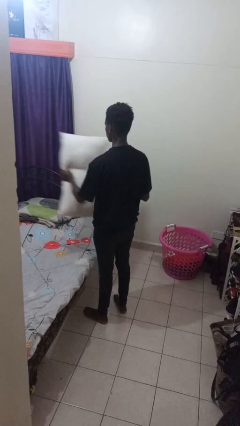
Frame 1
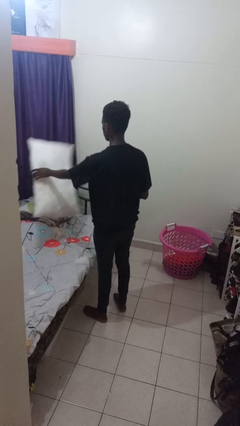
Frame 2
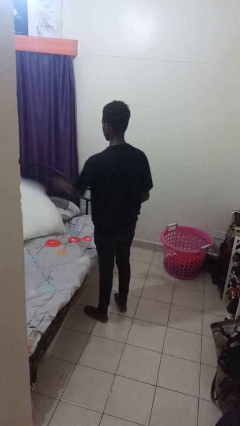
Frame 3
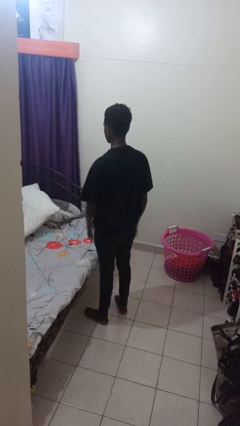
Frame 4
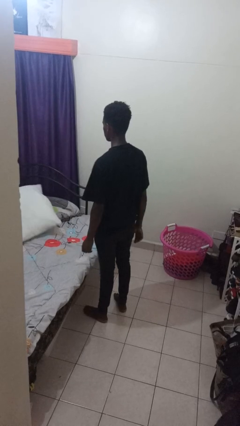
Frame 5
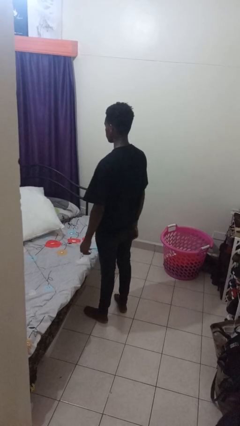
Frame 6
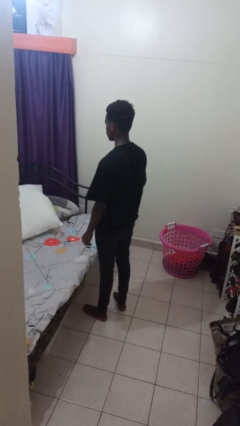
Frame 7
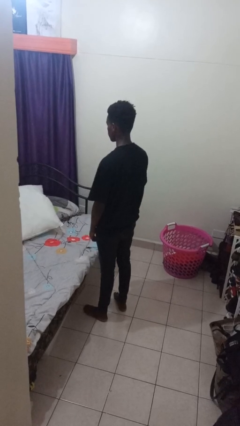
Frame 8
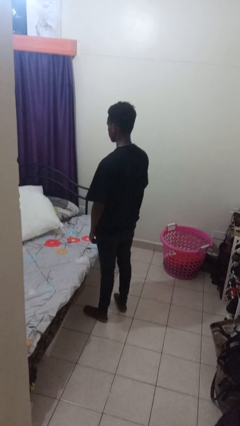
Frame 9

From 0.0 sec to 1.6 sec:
person puts down object on bed

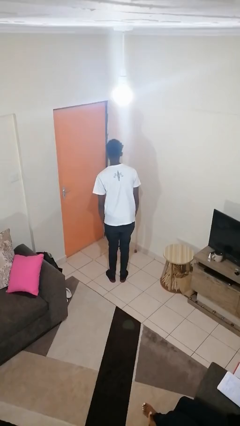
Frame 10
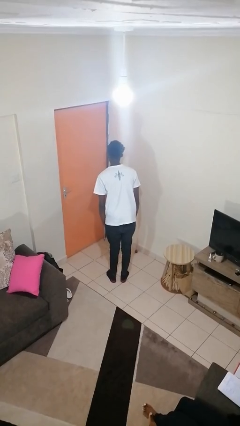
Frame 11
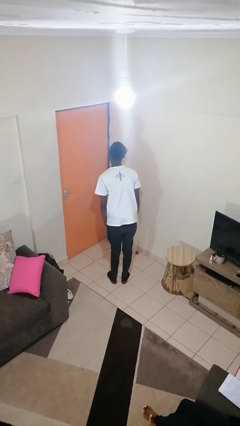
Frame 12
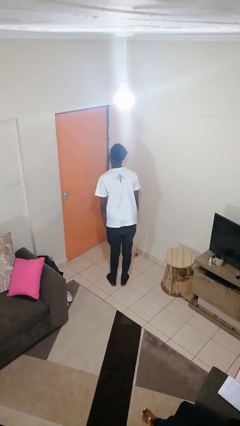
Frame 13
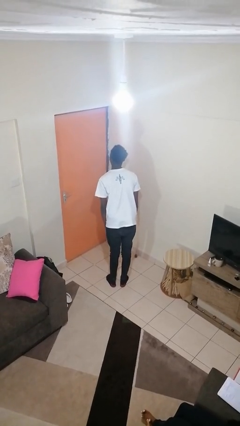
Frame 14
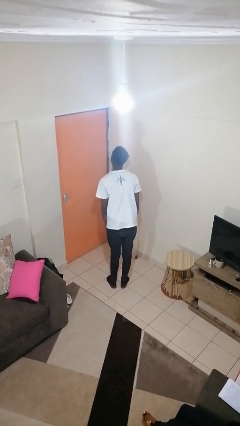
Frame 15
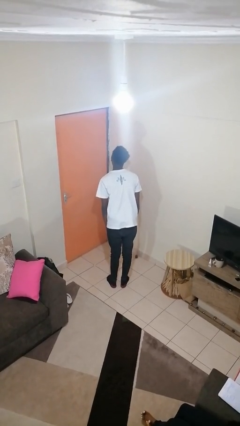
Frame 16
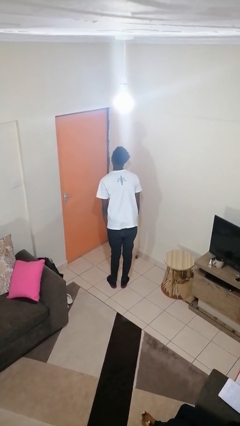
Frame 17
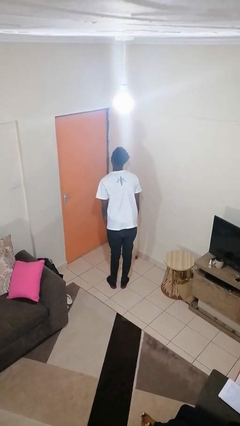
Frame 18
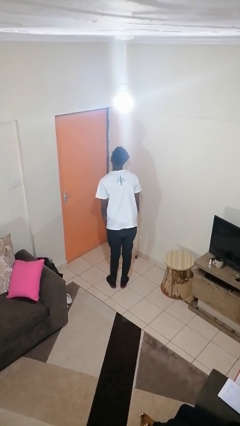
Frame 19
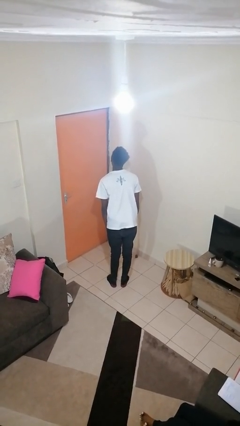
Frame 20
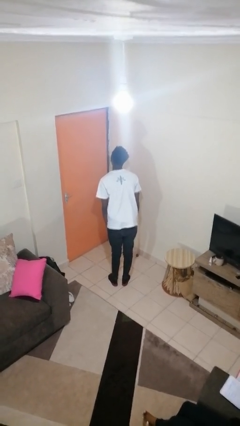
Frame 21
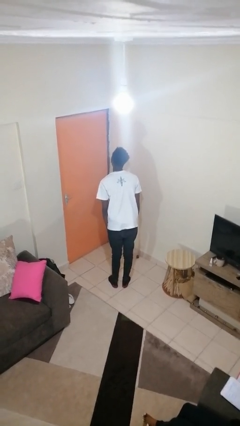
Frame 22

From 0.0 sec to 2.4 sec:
person sticks out tongue

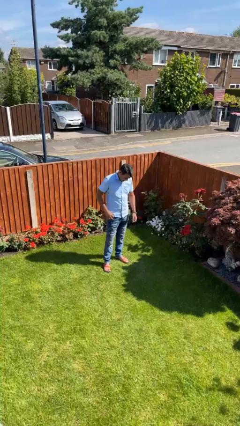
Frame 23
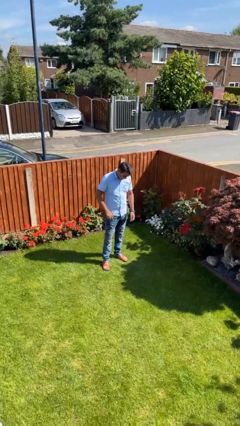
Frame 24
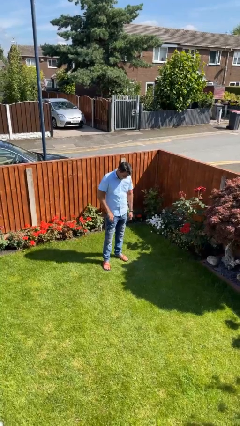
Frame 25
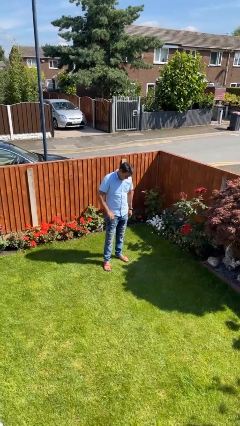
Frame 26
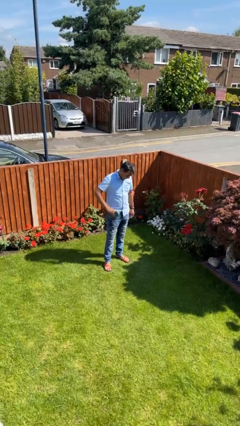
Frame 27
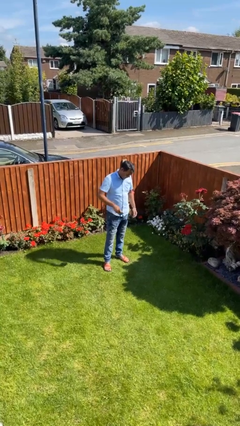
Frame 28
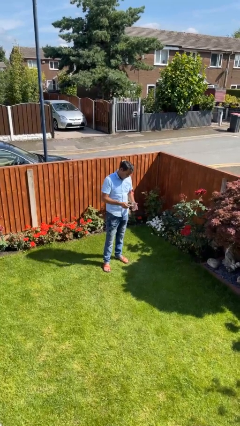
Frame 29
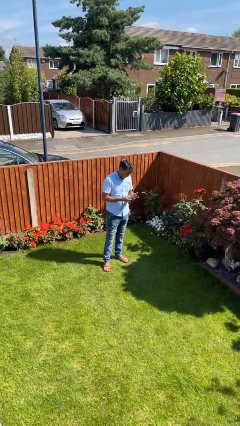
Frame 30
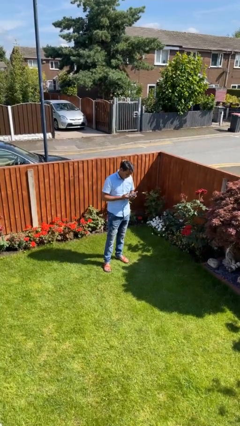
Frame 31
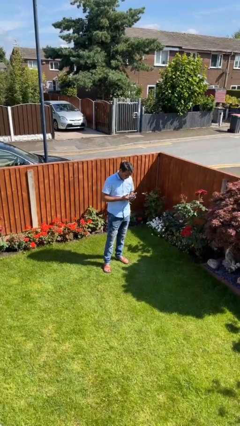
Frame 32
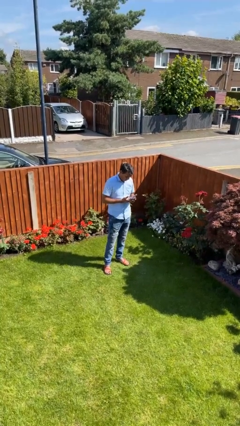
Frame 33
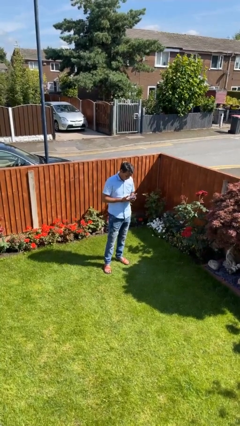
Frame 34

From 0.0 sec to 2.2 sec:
person takes phone from pocket

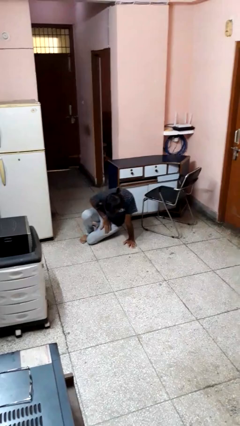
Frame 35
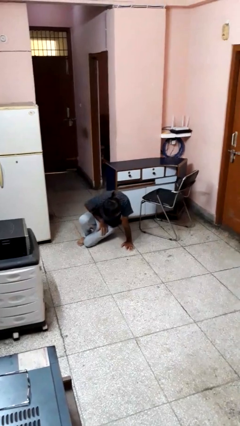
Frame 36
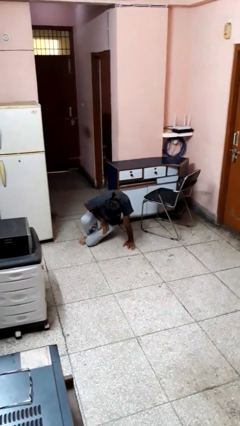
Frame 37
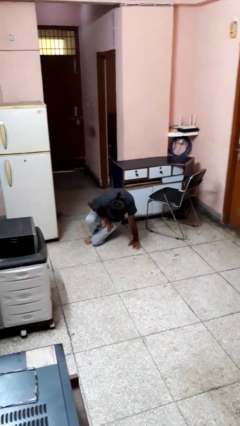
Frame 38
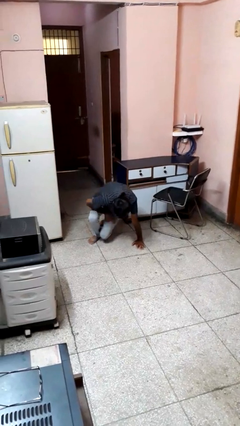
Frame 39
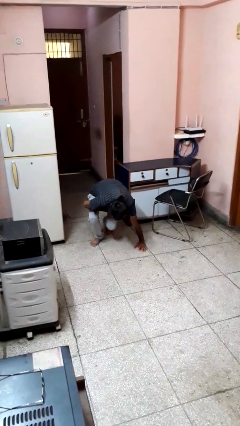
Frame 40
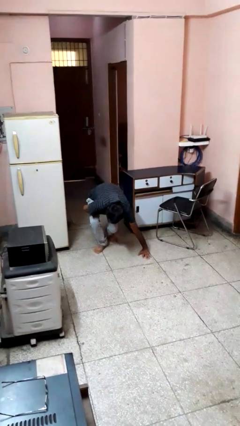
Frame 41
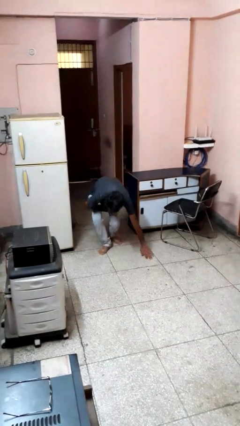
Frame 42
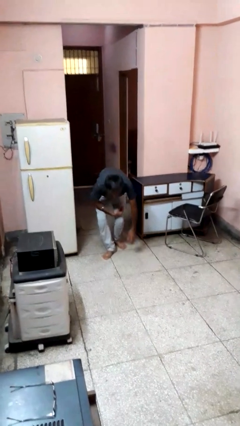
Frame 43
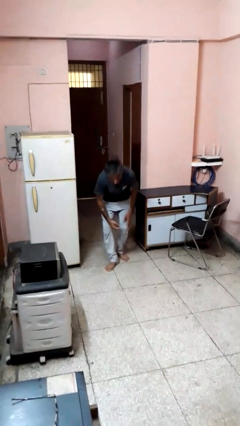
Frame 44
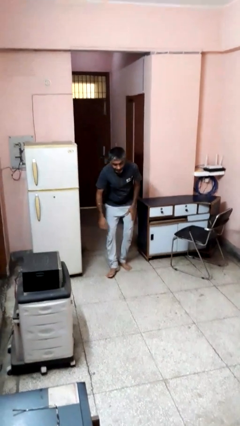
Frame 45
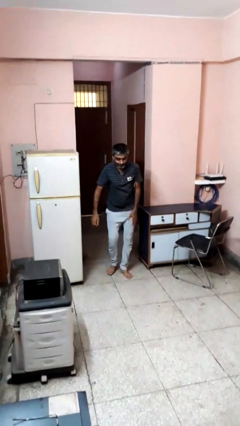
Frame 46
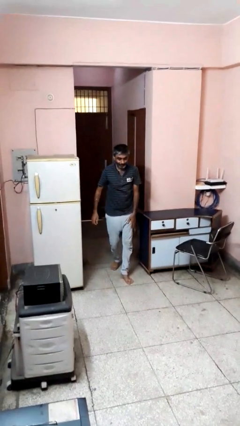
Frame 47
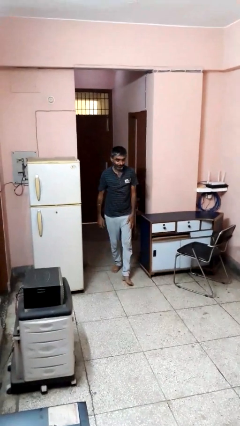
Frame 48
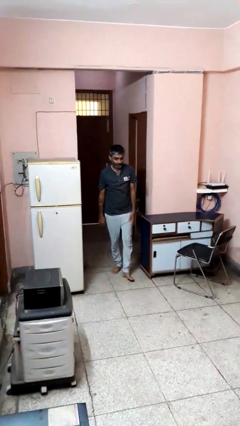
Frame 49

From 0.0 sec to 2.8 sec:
person stands up from floor

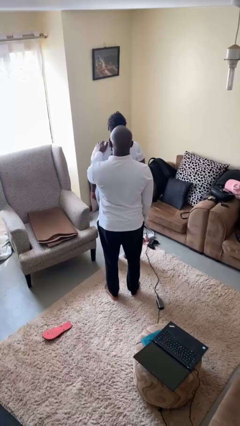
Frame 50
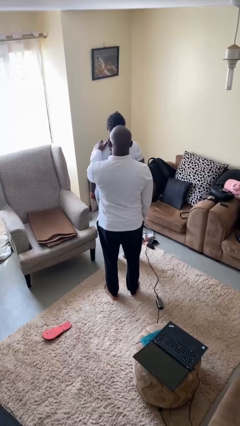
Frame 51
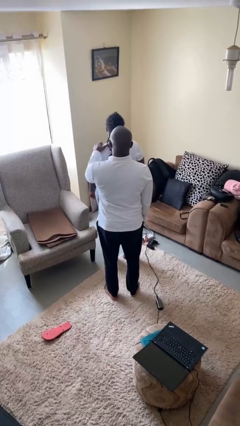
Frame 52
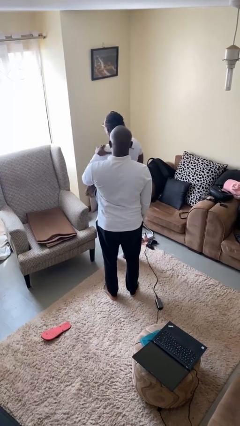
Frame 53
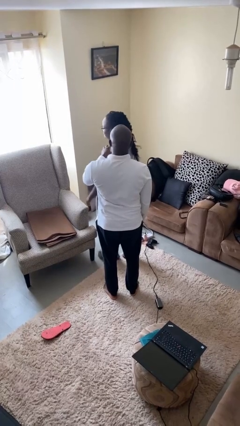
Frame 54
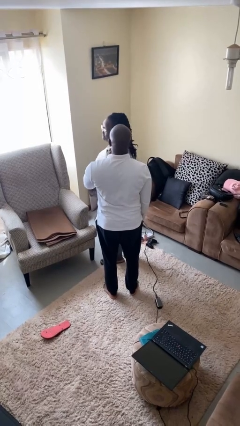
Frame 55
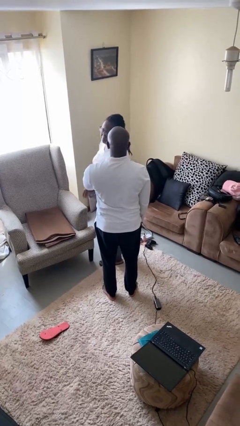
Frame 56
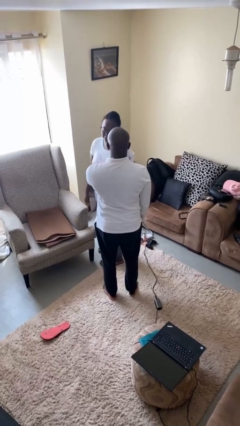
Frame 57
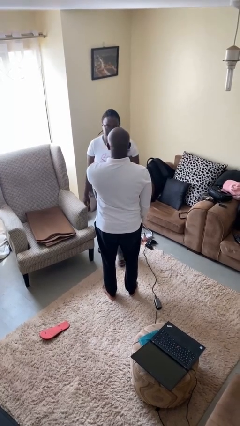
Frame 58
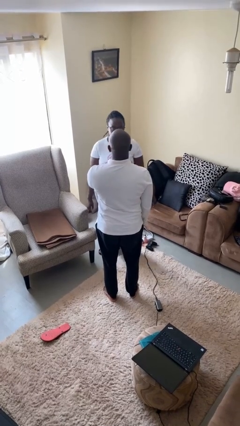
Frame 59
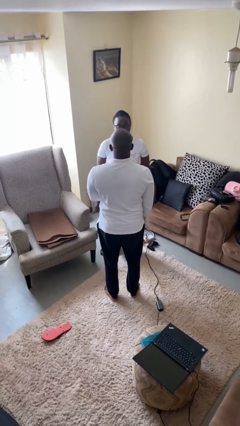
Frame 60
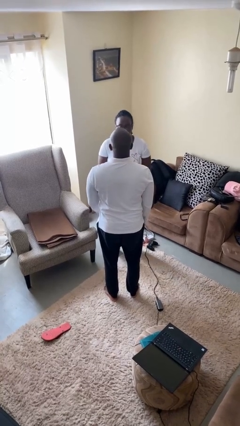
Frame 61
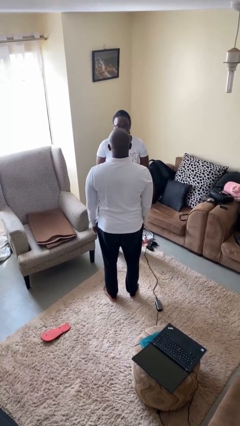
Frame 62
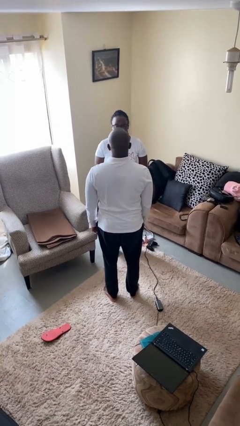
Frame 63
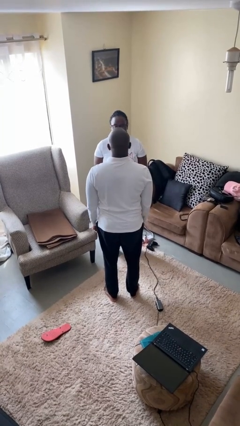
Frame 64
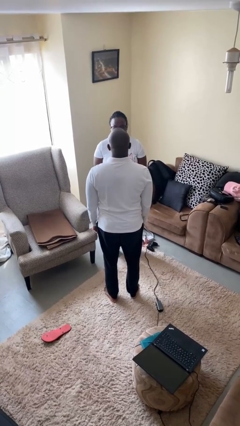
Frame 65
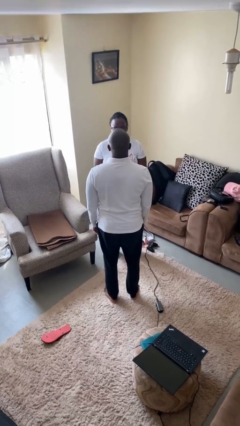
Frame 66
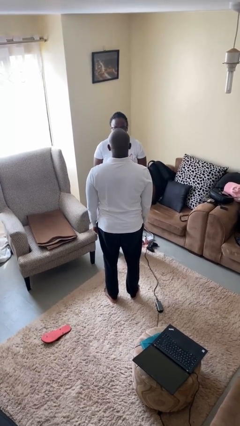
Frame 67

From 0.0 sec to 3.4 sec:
person spins person around

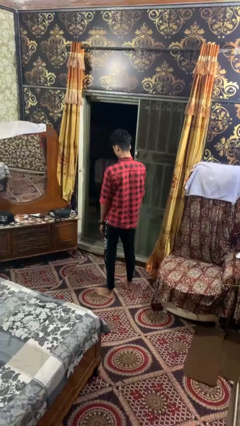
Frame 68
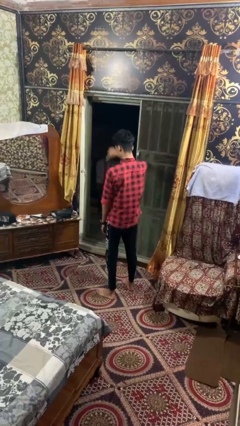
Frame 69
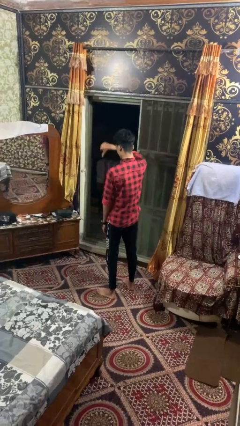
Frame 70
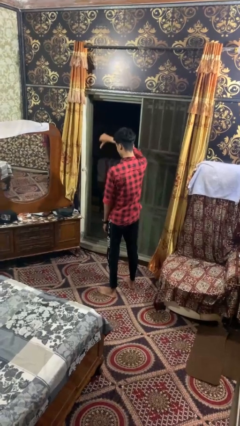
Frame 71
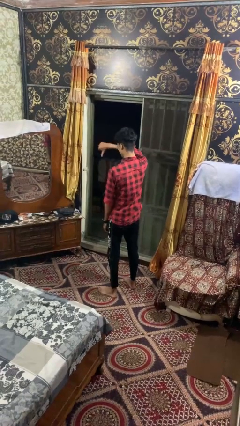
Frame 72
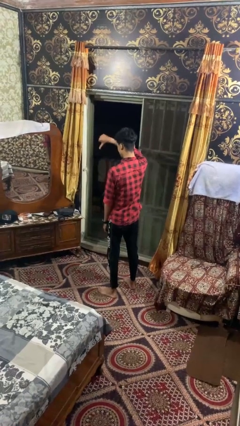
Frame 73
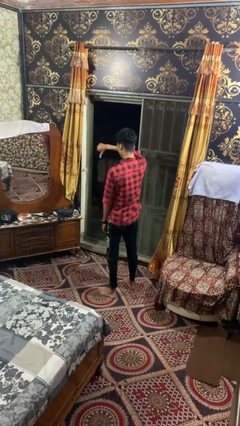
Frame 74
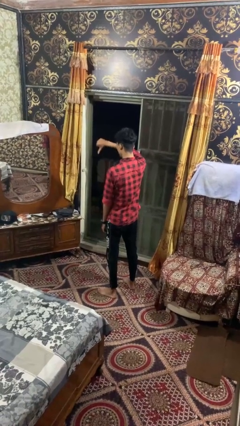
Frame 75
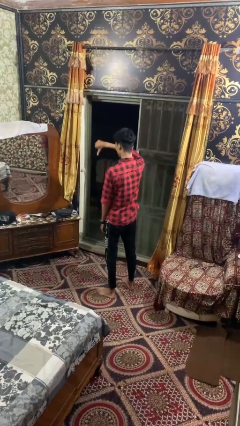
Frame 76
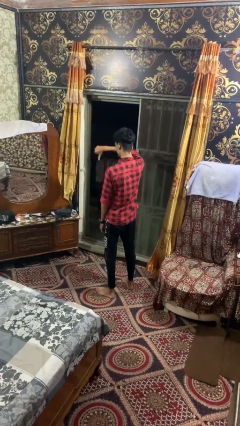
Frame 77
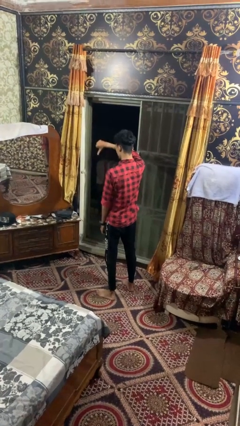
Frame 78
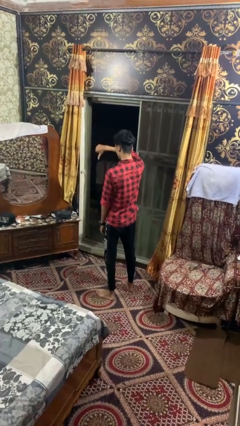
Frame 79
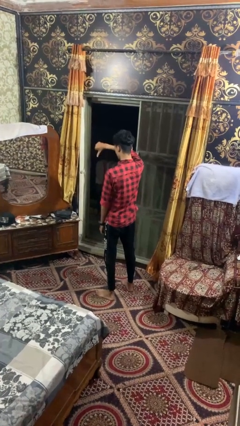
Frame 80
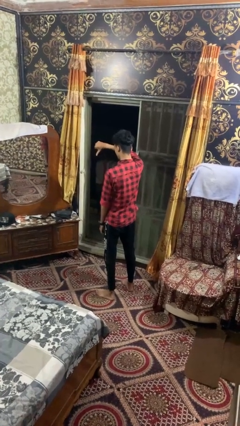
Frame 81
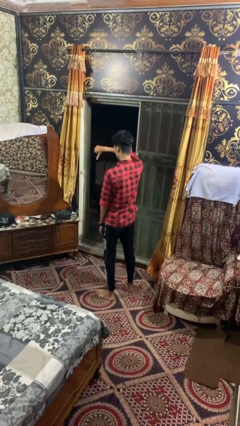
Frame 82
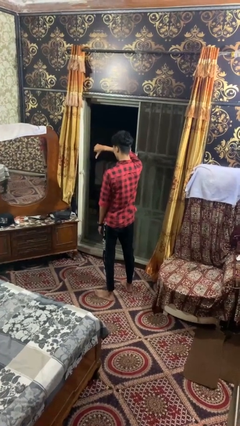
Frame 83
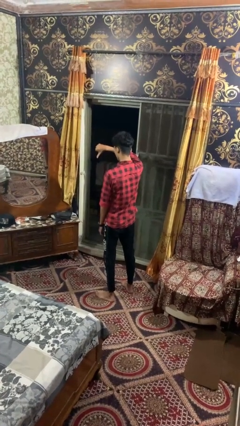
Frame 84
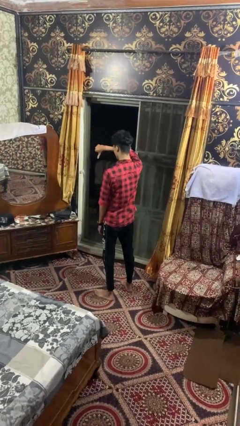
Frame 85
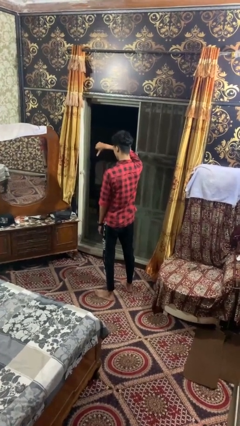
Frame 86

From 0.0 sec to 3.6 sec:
person gestures thumbs down

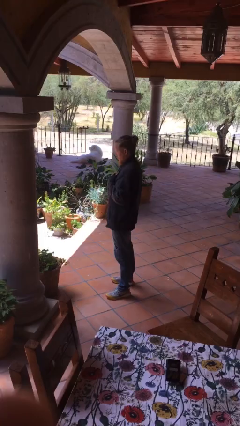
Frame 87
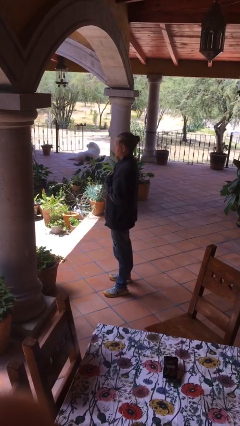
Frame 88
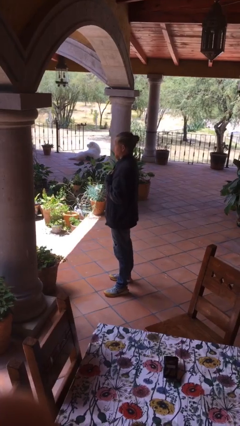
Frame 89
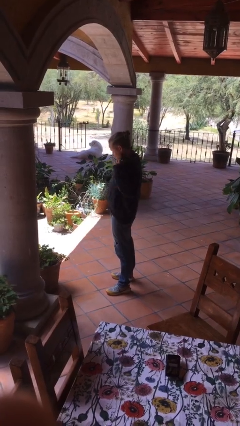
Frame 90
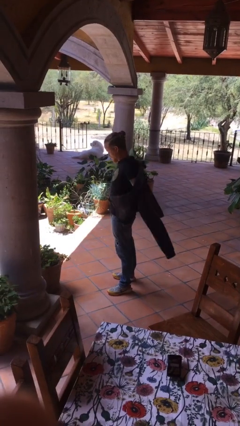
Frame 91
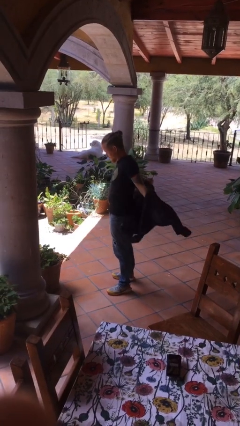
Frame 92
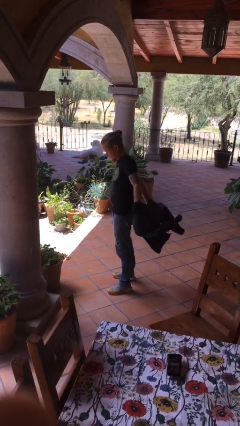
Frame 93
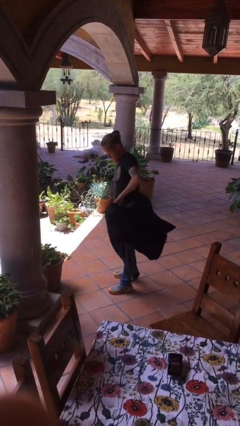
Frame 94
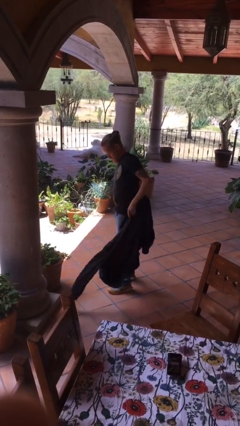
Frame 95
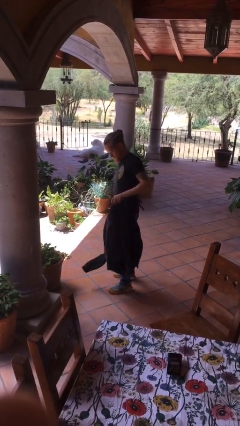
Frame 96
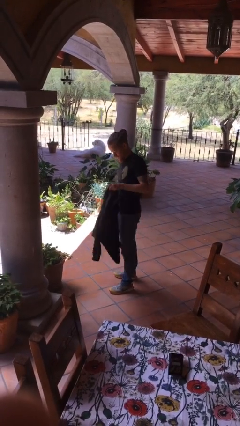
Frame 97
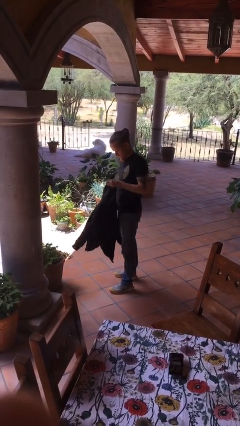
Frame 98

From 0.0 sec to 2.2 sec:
person takes off jacket
